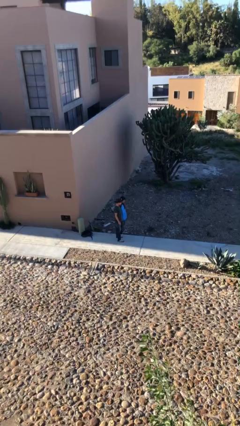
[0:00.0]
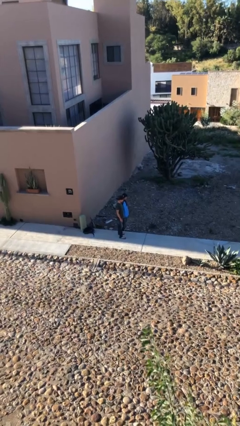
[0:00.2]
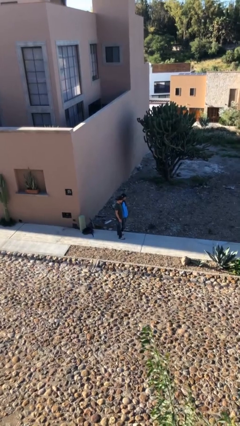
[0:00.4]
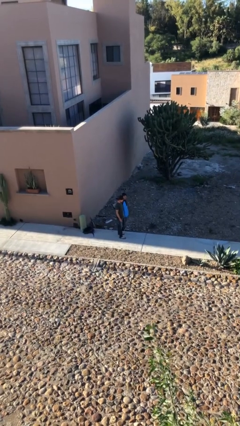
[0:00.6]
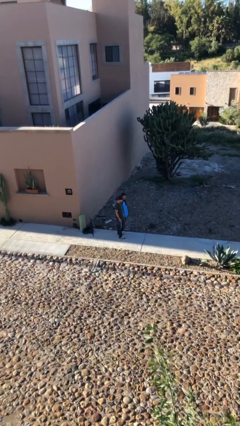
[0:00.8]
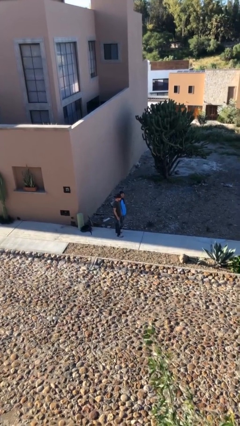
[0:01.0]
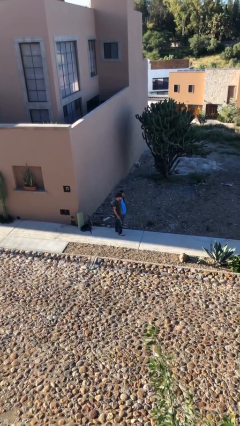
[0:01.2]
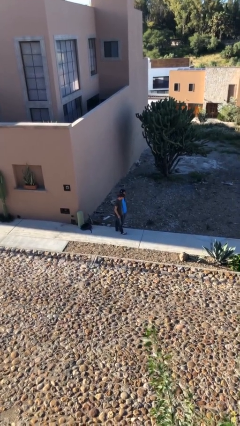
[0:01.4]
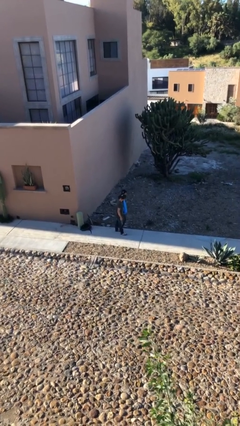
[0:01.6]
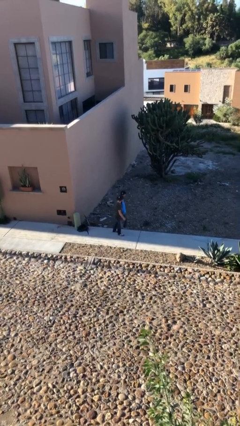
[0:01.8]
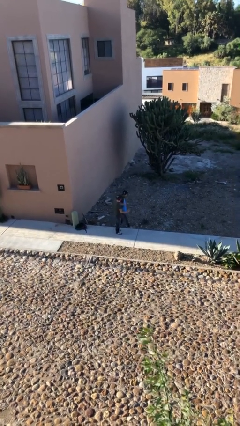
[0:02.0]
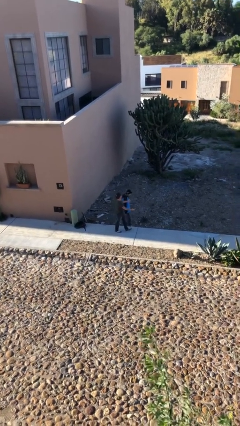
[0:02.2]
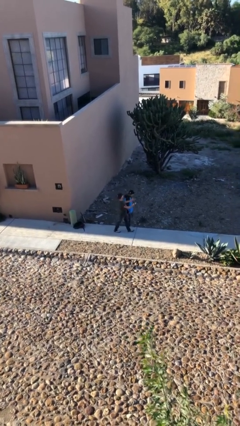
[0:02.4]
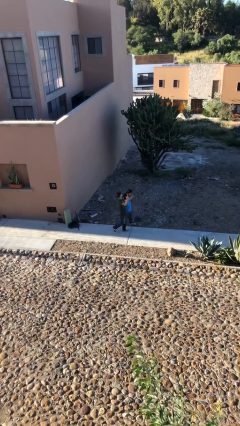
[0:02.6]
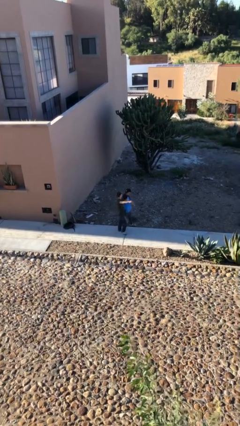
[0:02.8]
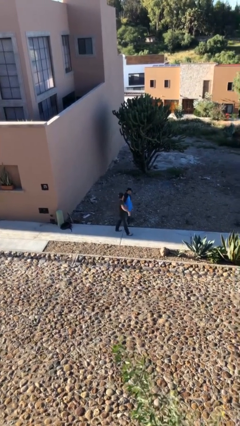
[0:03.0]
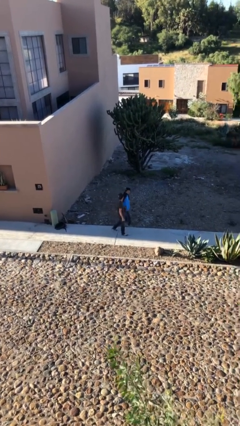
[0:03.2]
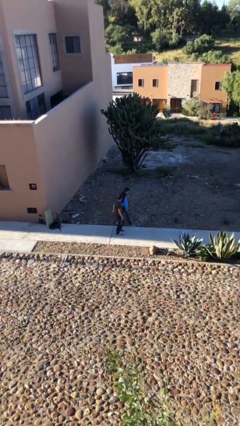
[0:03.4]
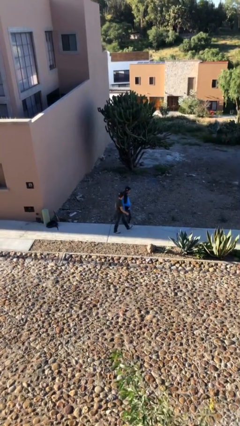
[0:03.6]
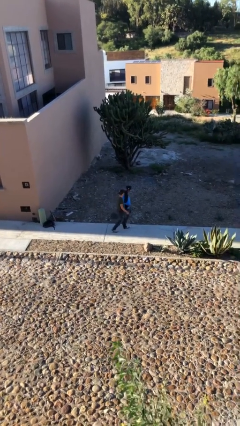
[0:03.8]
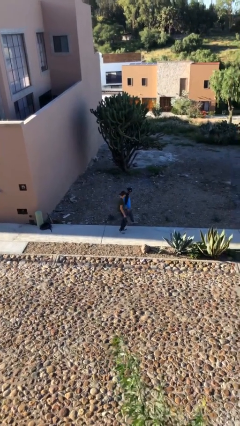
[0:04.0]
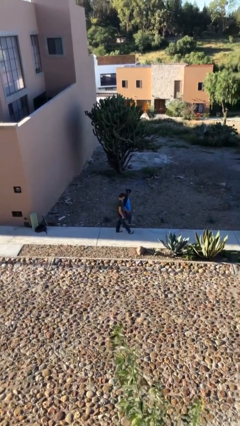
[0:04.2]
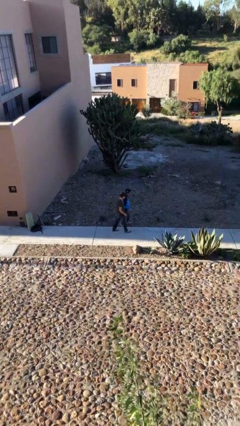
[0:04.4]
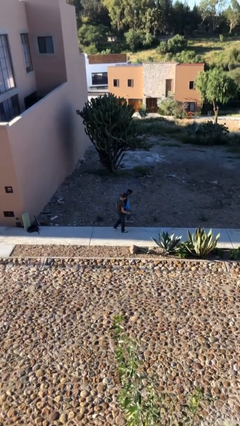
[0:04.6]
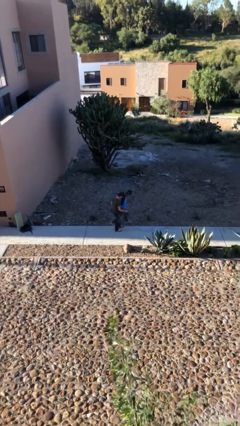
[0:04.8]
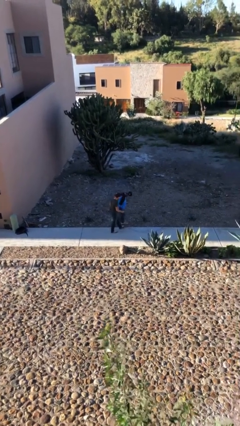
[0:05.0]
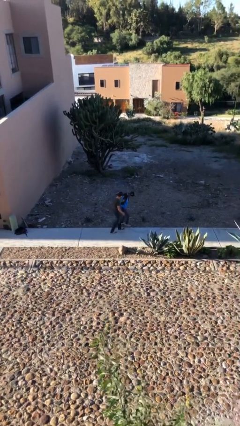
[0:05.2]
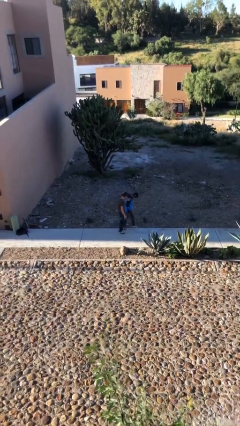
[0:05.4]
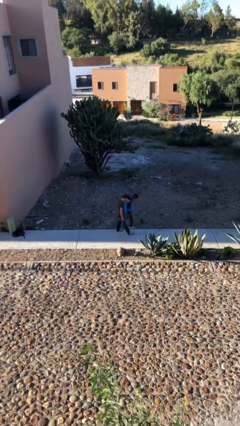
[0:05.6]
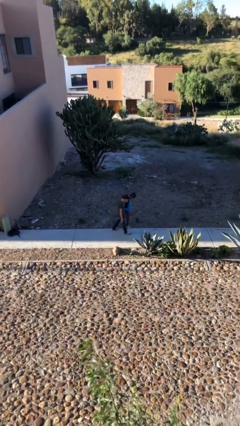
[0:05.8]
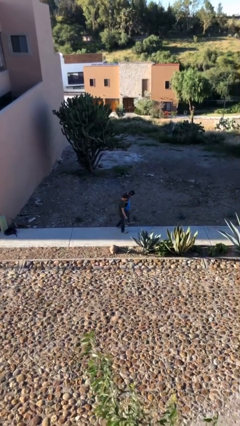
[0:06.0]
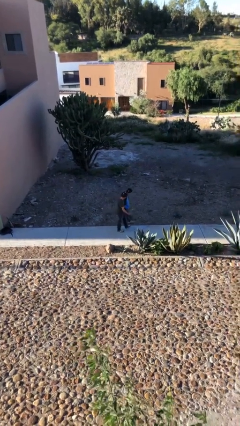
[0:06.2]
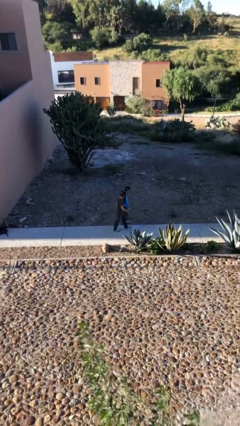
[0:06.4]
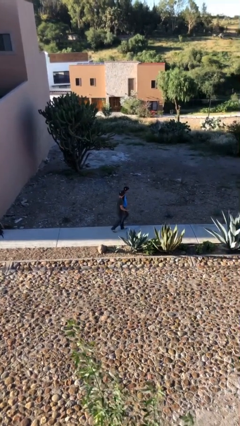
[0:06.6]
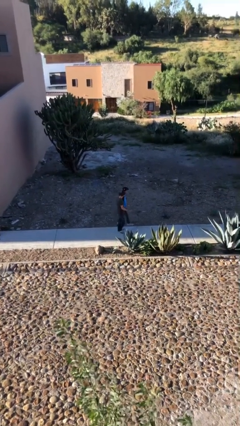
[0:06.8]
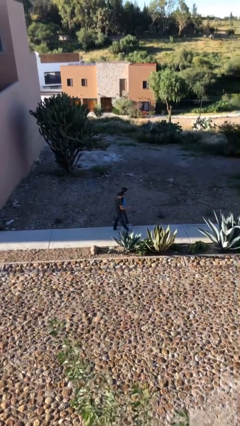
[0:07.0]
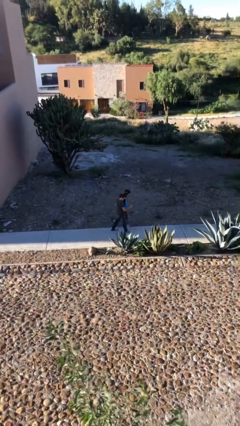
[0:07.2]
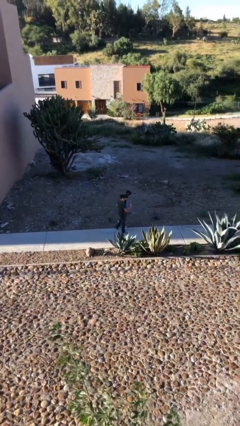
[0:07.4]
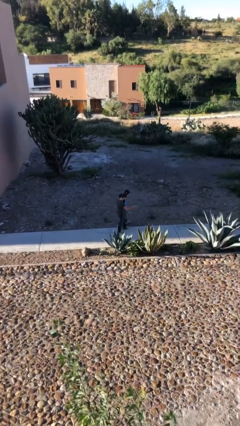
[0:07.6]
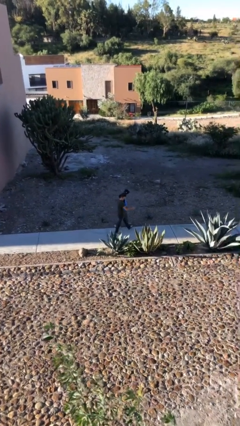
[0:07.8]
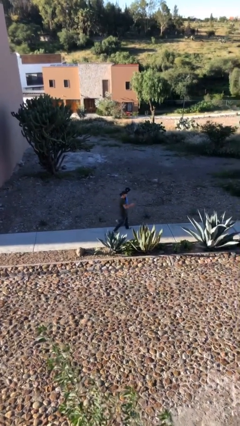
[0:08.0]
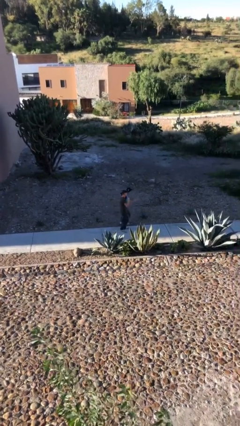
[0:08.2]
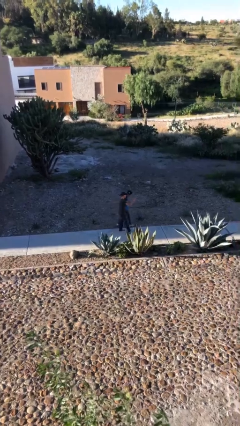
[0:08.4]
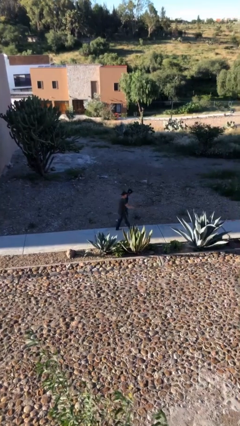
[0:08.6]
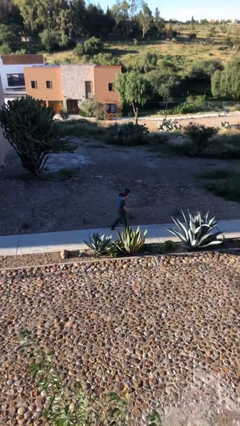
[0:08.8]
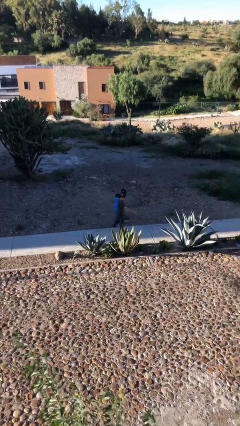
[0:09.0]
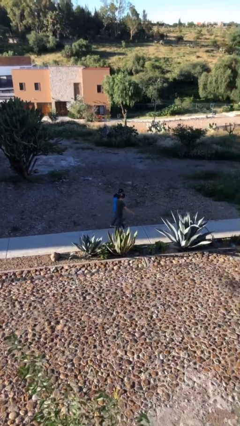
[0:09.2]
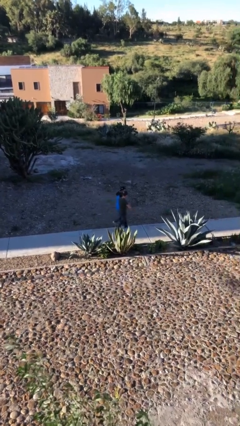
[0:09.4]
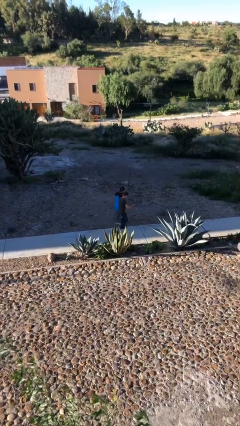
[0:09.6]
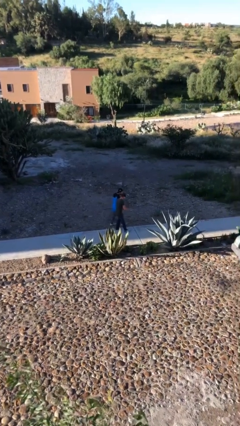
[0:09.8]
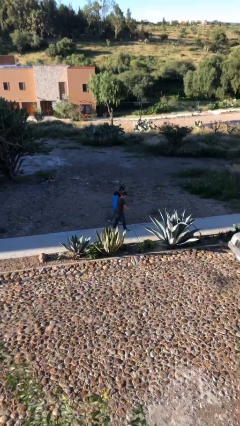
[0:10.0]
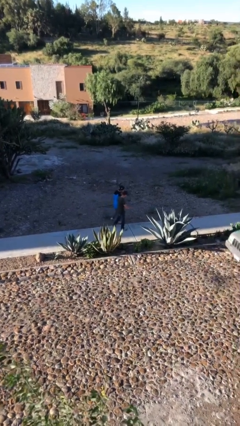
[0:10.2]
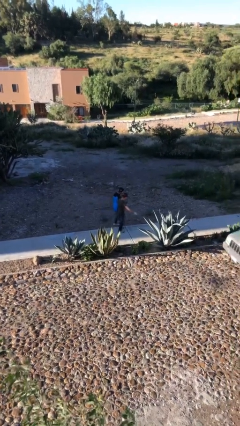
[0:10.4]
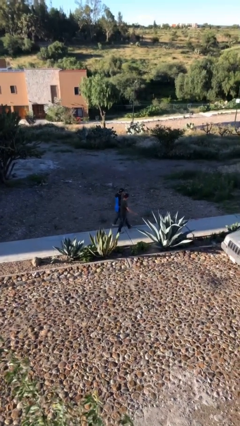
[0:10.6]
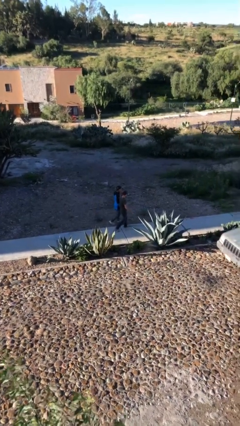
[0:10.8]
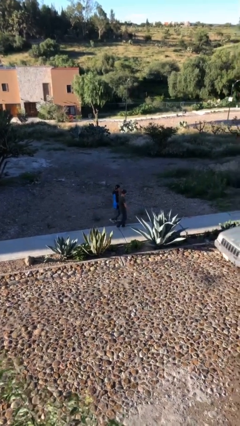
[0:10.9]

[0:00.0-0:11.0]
person talks to person

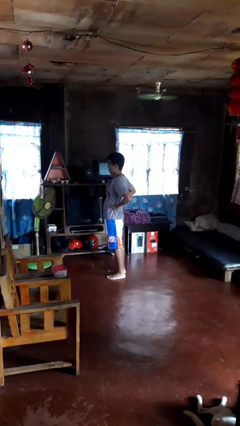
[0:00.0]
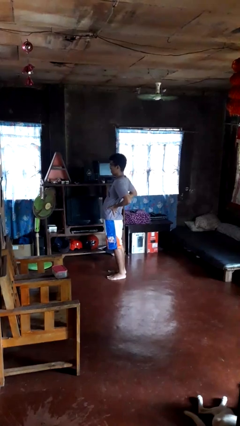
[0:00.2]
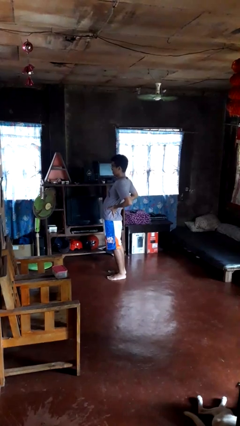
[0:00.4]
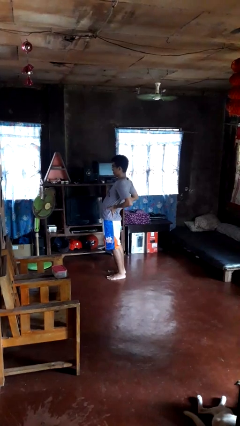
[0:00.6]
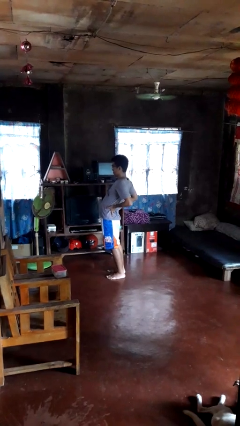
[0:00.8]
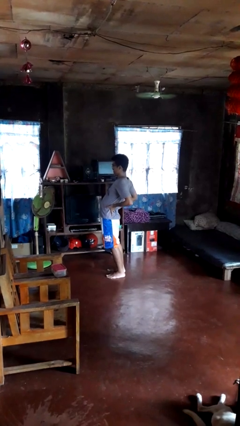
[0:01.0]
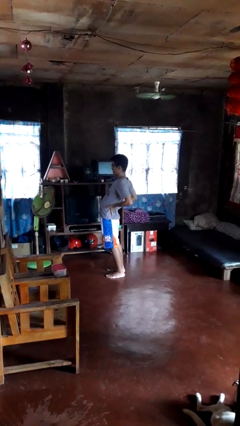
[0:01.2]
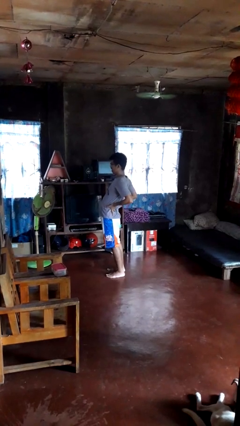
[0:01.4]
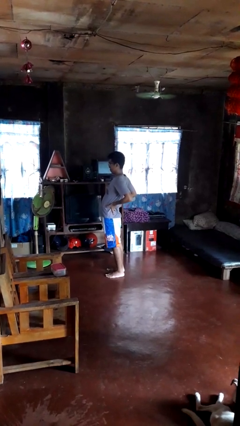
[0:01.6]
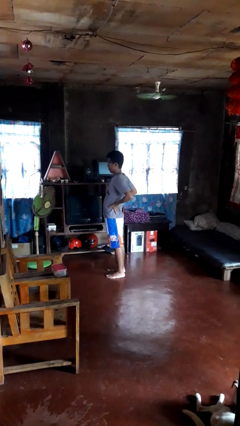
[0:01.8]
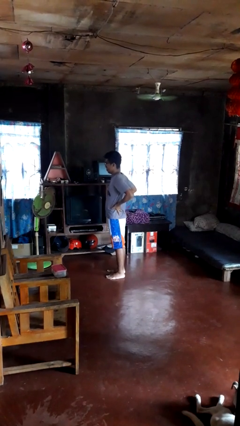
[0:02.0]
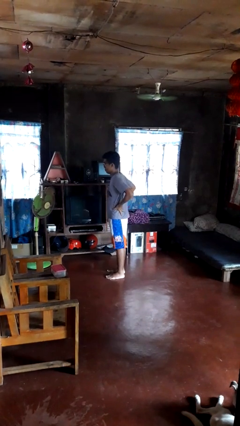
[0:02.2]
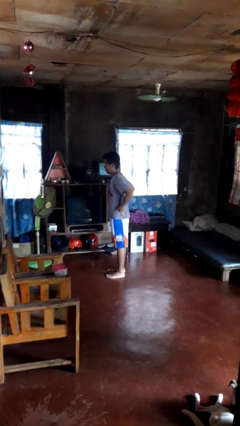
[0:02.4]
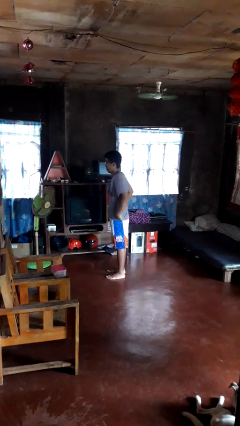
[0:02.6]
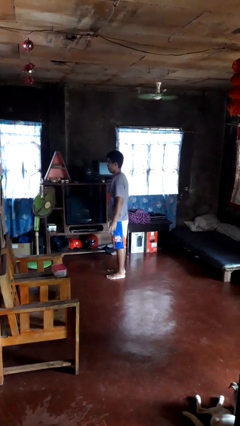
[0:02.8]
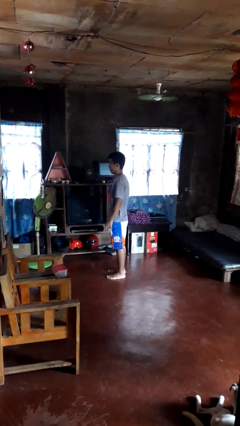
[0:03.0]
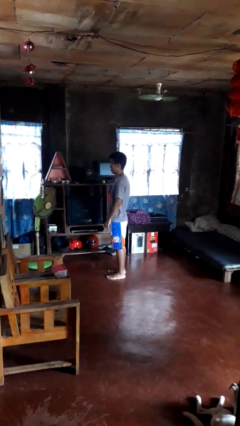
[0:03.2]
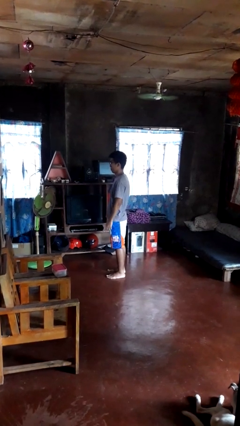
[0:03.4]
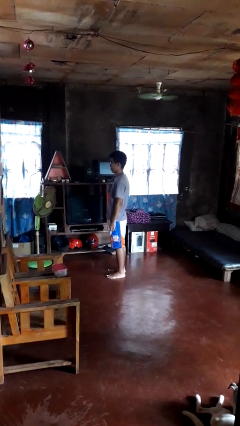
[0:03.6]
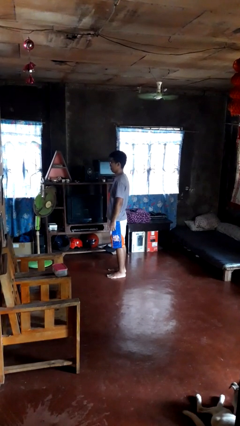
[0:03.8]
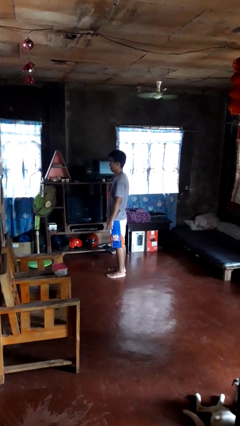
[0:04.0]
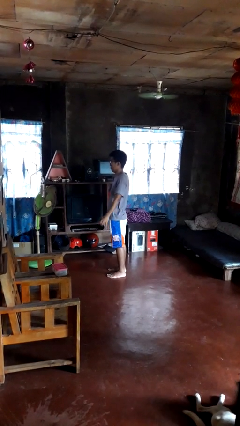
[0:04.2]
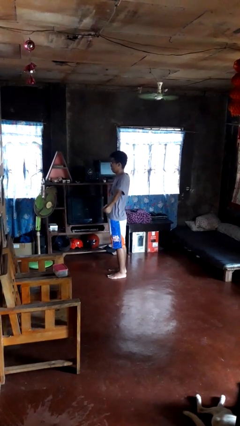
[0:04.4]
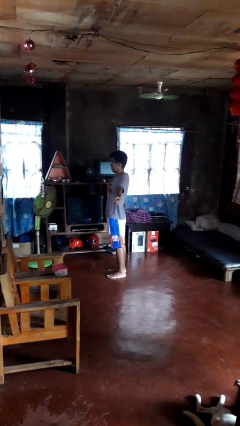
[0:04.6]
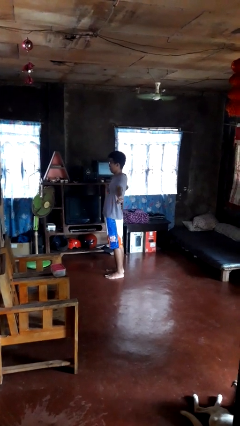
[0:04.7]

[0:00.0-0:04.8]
person stretches back

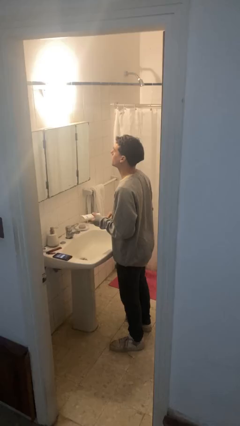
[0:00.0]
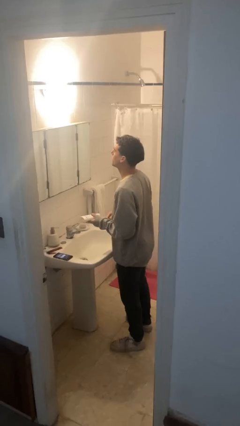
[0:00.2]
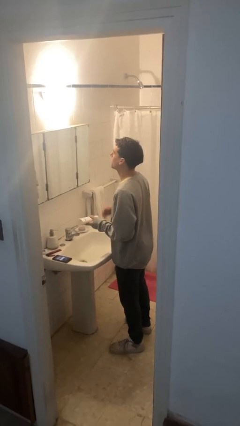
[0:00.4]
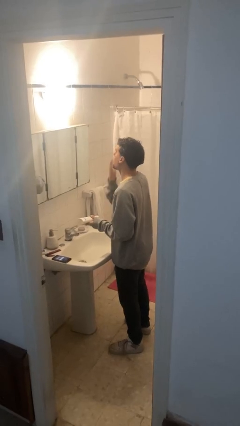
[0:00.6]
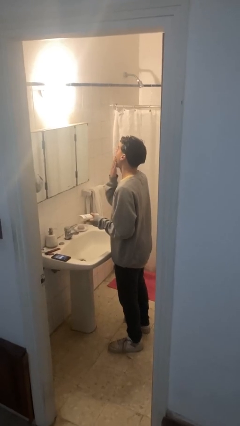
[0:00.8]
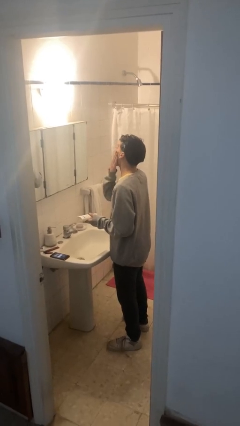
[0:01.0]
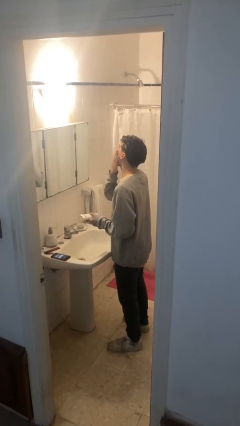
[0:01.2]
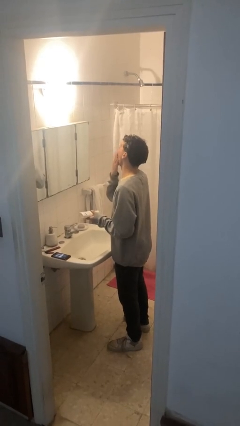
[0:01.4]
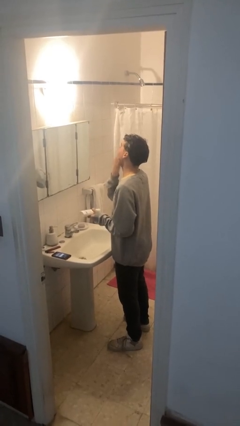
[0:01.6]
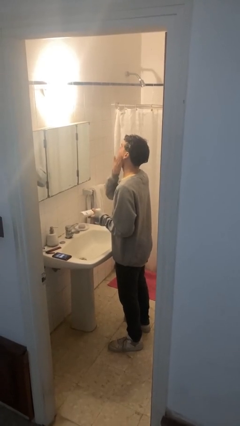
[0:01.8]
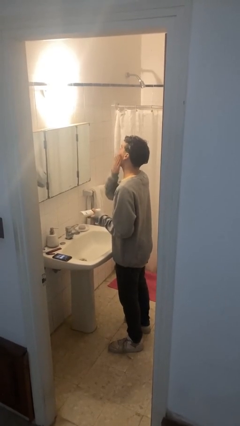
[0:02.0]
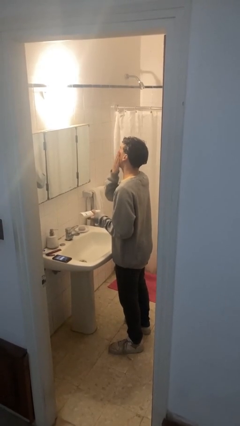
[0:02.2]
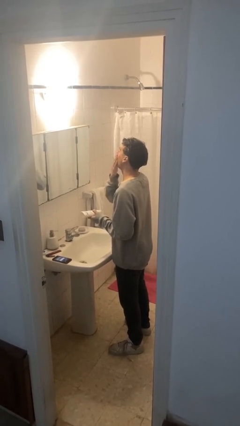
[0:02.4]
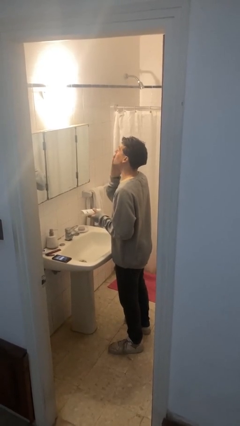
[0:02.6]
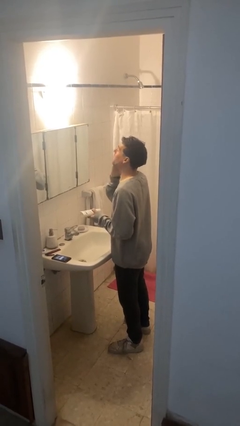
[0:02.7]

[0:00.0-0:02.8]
person applies foundation makeup
